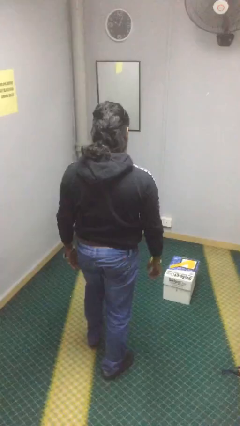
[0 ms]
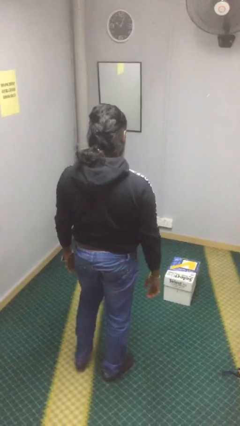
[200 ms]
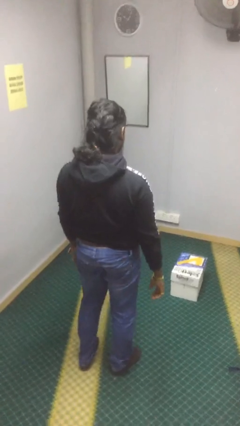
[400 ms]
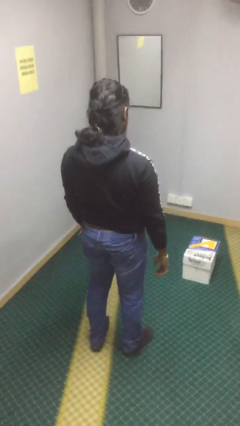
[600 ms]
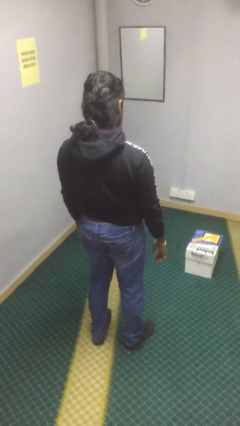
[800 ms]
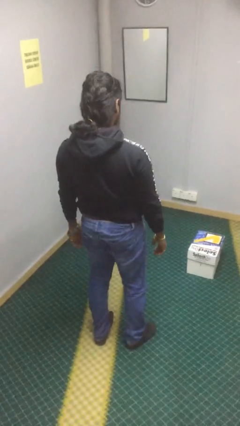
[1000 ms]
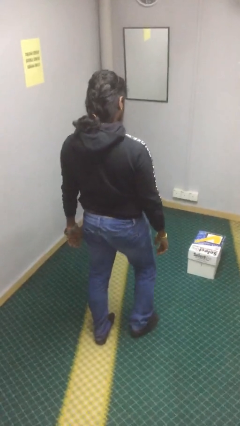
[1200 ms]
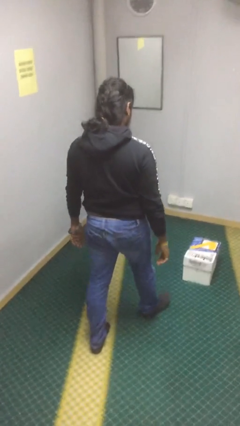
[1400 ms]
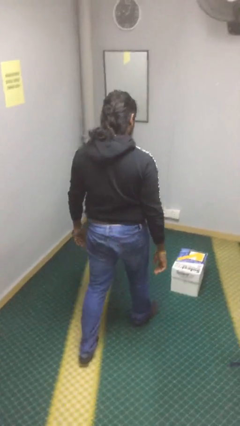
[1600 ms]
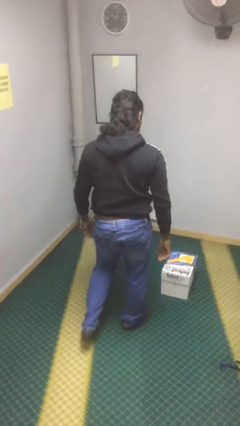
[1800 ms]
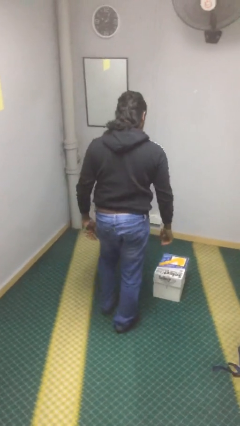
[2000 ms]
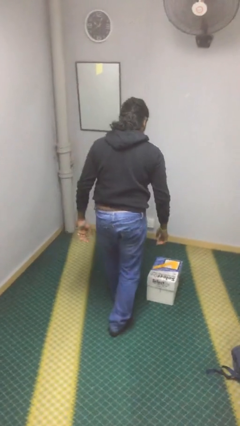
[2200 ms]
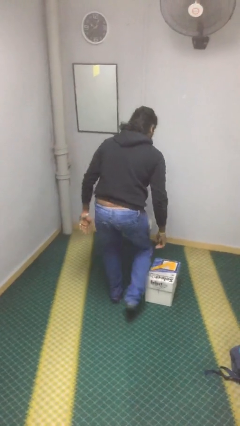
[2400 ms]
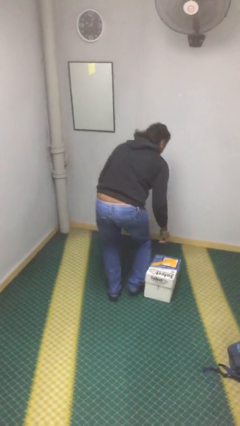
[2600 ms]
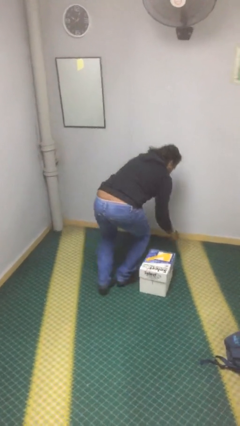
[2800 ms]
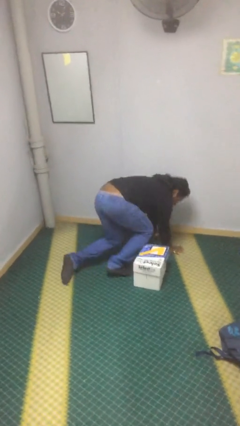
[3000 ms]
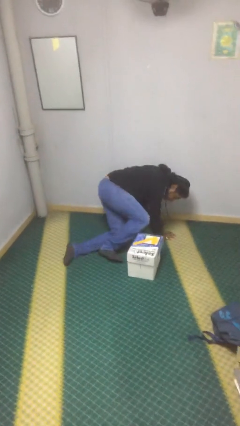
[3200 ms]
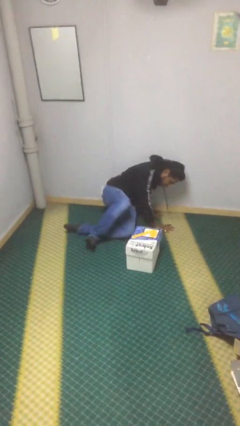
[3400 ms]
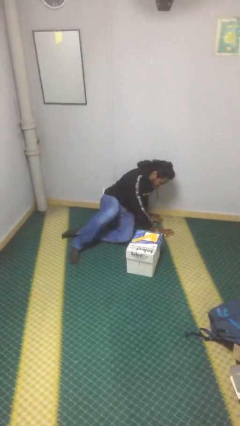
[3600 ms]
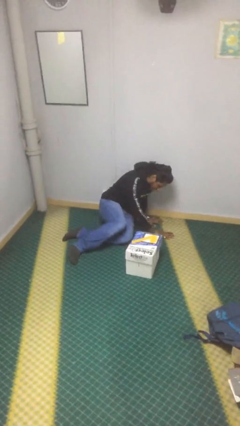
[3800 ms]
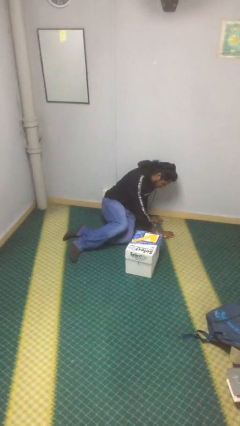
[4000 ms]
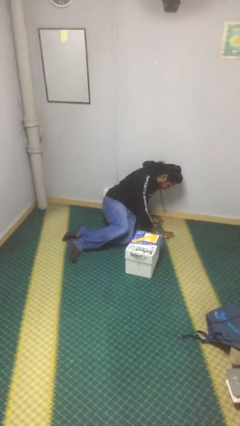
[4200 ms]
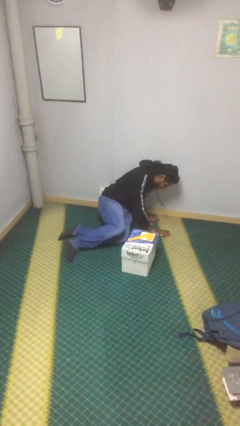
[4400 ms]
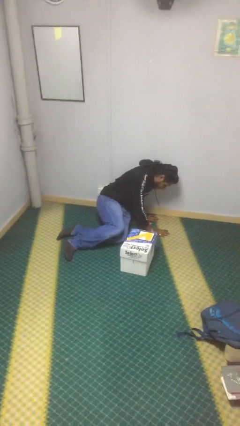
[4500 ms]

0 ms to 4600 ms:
person trips on object on floor

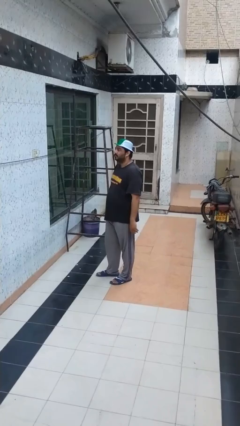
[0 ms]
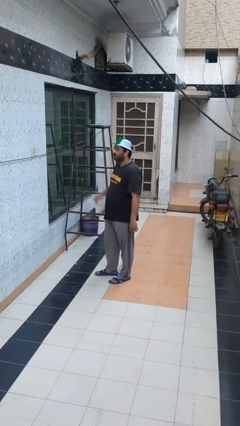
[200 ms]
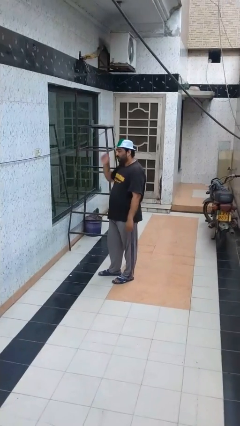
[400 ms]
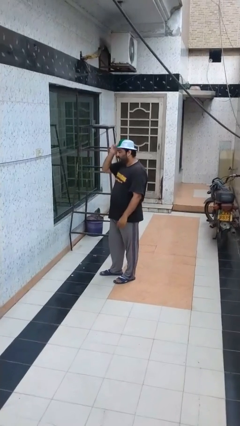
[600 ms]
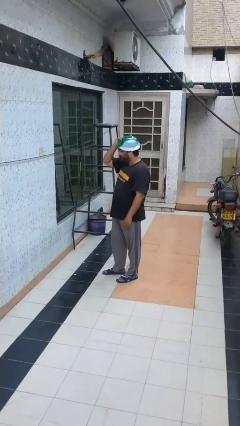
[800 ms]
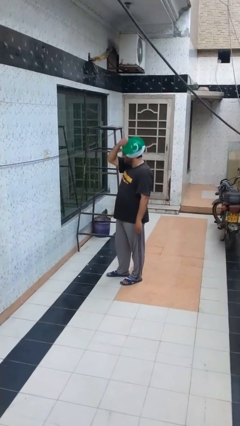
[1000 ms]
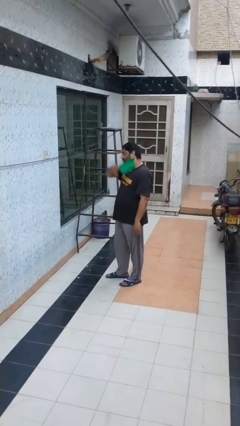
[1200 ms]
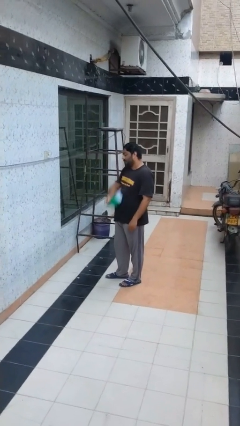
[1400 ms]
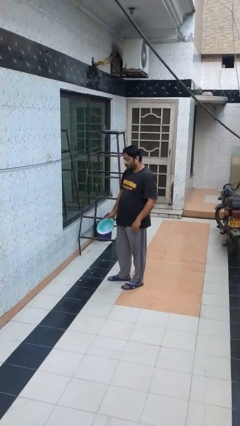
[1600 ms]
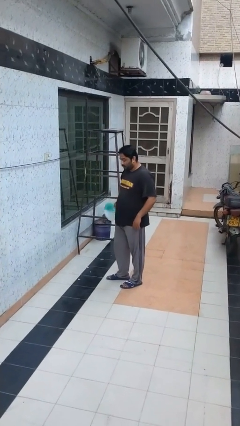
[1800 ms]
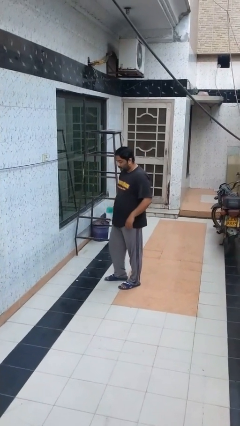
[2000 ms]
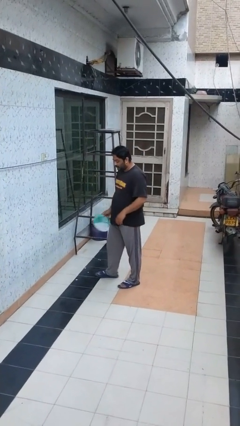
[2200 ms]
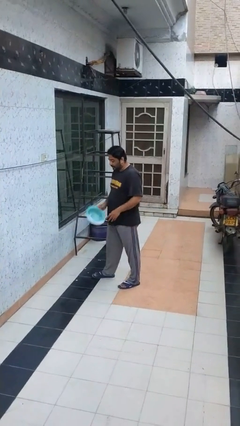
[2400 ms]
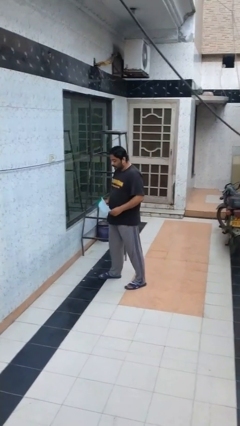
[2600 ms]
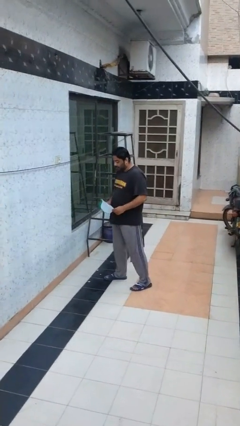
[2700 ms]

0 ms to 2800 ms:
person takes off hat

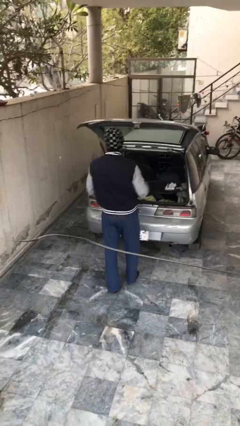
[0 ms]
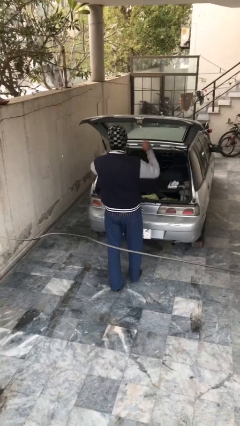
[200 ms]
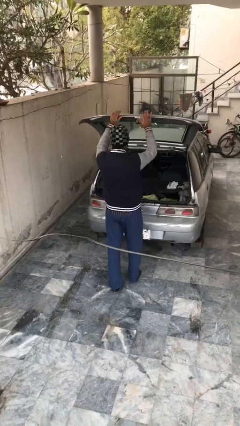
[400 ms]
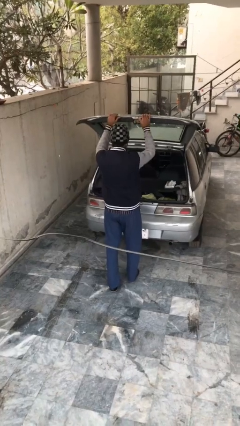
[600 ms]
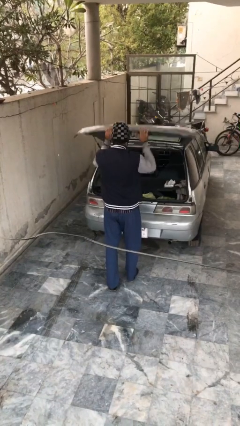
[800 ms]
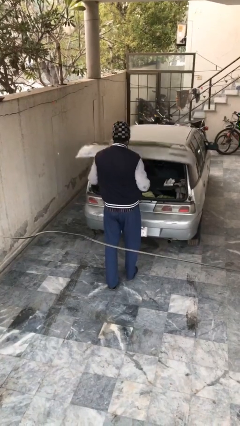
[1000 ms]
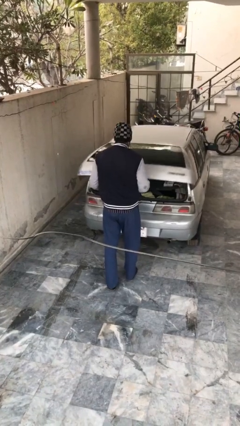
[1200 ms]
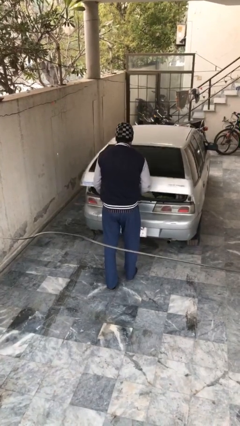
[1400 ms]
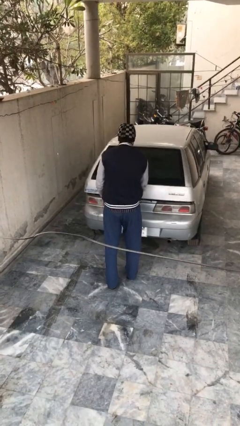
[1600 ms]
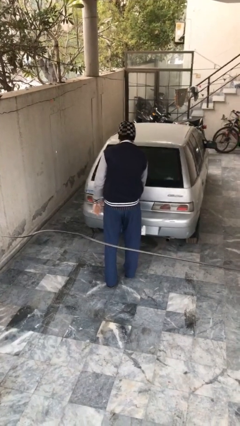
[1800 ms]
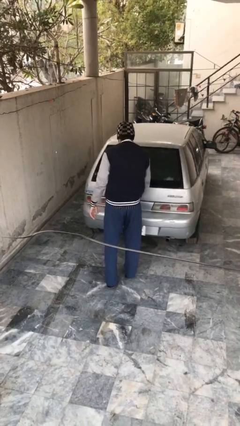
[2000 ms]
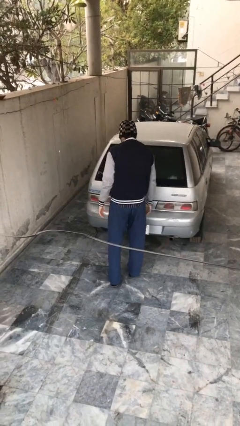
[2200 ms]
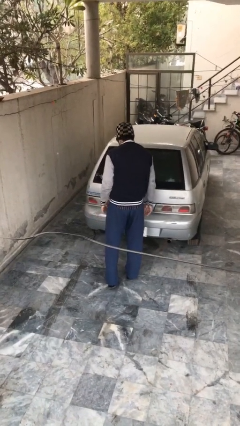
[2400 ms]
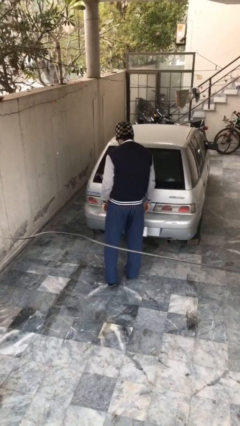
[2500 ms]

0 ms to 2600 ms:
person closes car trunk

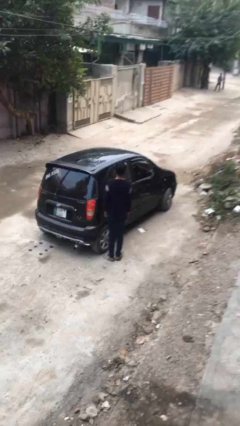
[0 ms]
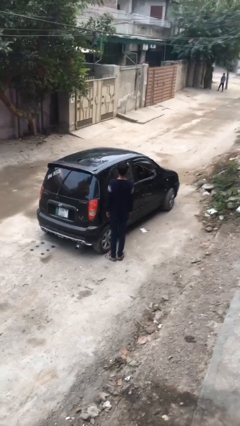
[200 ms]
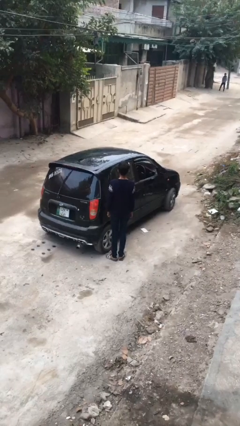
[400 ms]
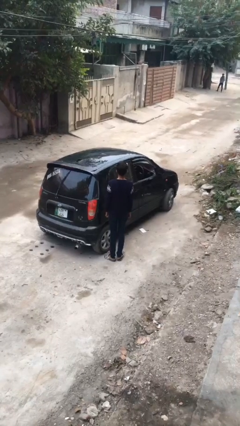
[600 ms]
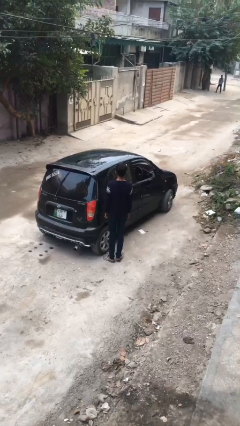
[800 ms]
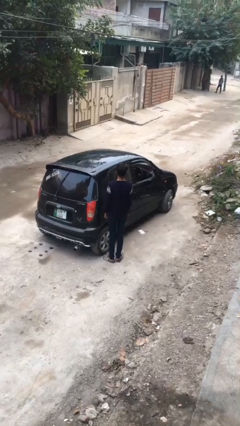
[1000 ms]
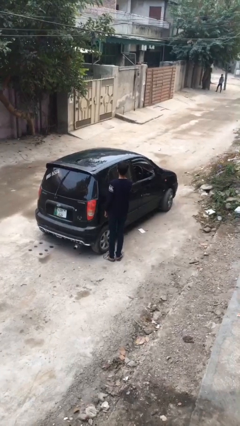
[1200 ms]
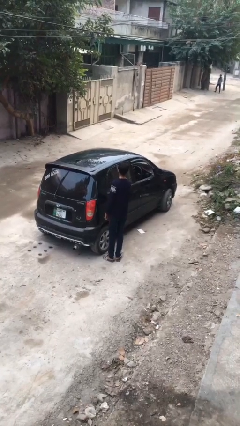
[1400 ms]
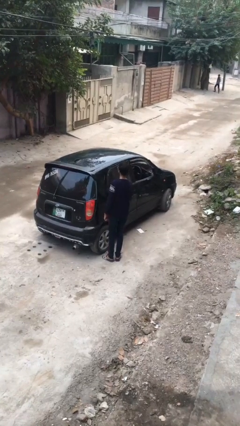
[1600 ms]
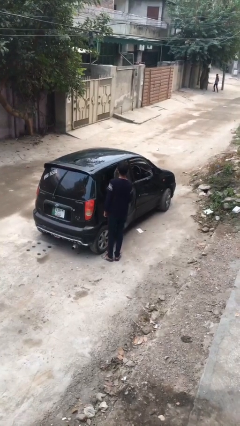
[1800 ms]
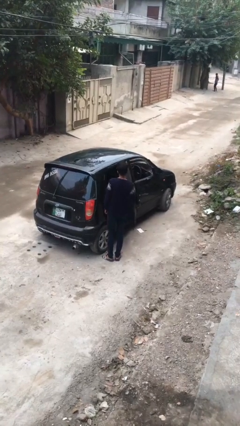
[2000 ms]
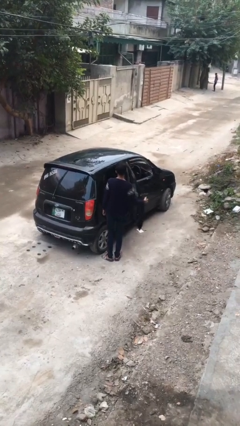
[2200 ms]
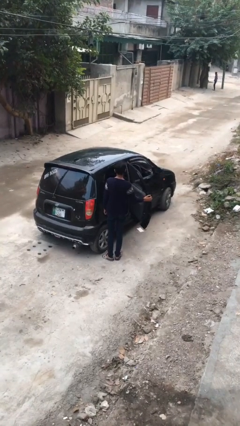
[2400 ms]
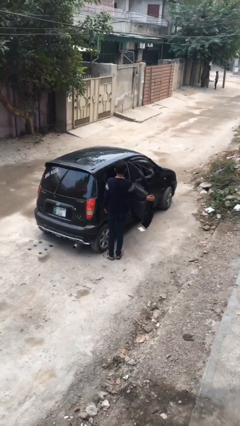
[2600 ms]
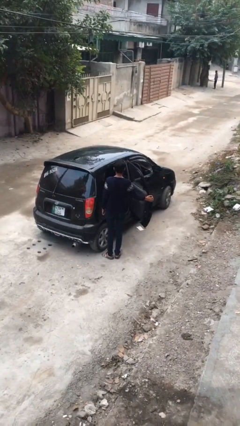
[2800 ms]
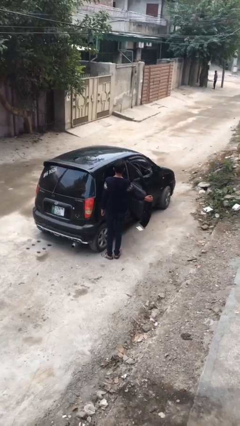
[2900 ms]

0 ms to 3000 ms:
person opens car door

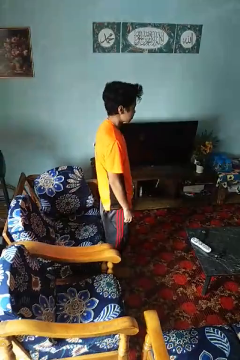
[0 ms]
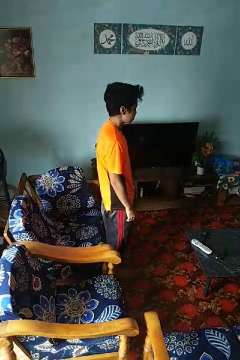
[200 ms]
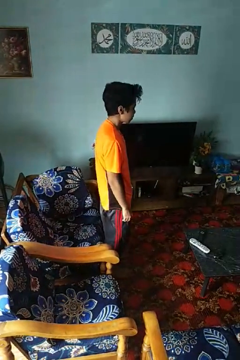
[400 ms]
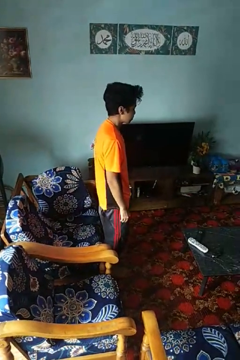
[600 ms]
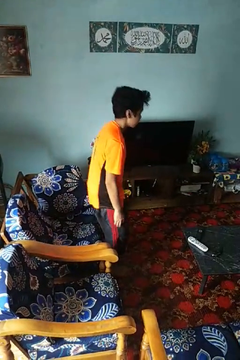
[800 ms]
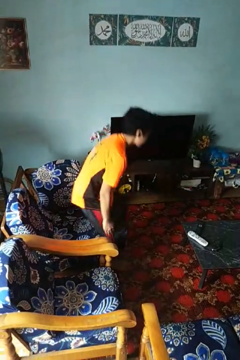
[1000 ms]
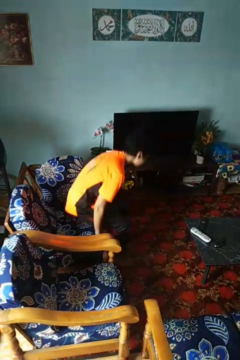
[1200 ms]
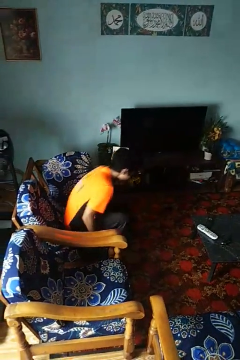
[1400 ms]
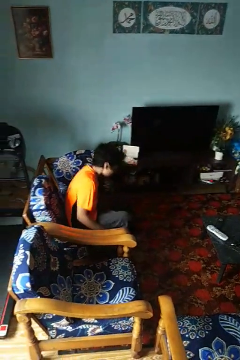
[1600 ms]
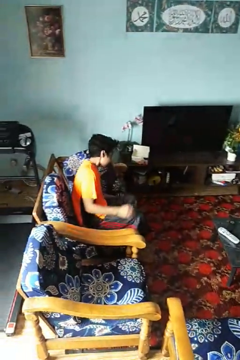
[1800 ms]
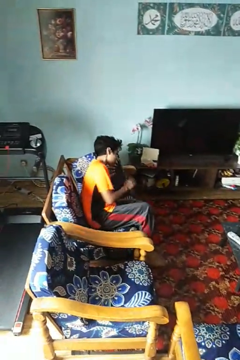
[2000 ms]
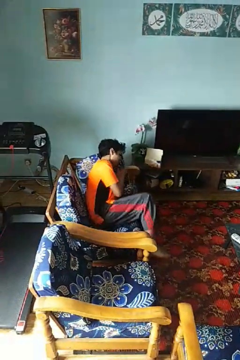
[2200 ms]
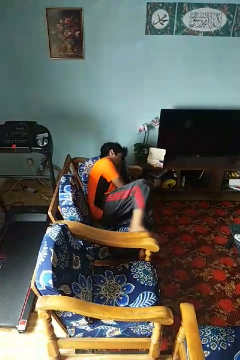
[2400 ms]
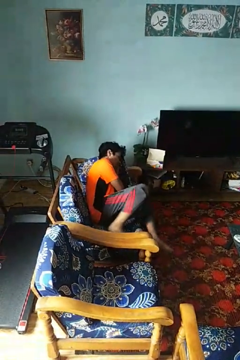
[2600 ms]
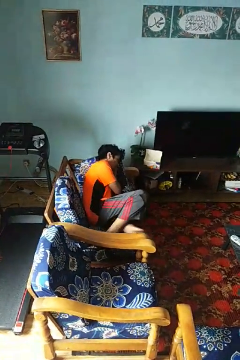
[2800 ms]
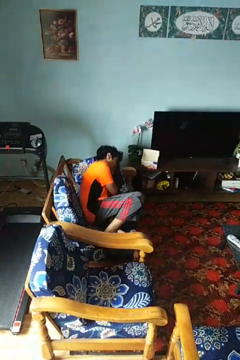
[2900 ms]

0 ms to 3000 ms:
person lies down on couch

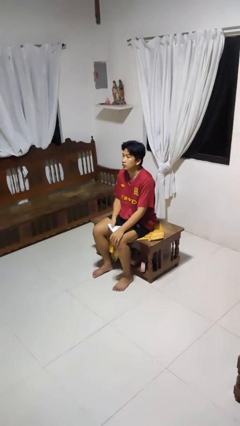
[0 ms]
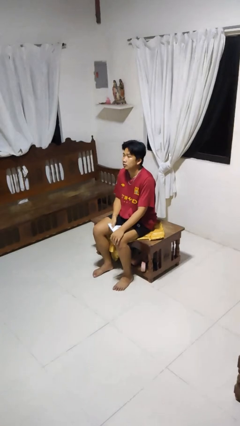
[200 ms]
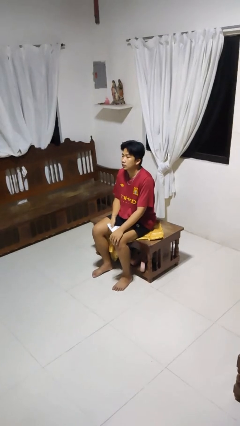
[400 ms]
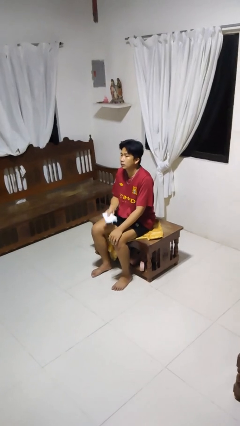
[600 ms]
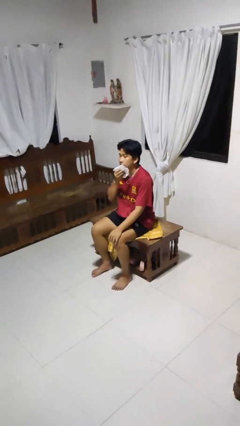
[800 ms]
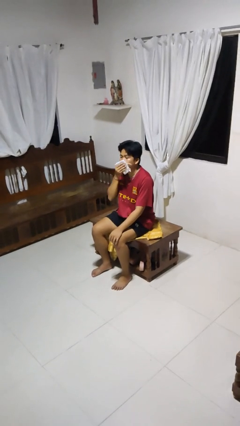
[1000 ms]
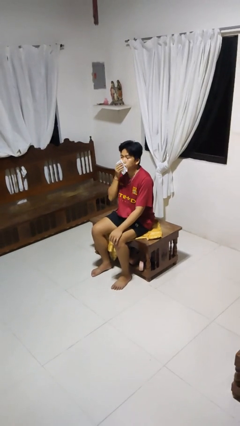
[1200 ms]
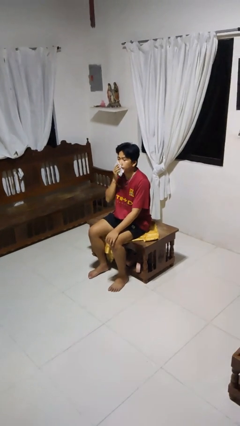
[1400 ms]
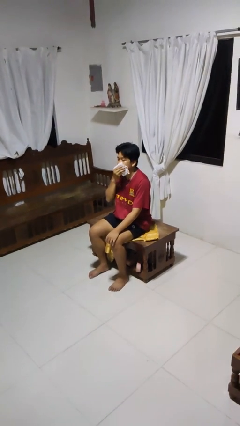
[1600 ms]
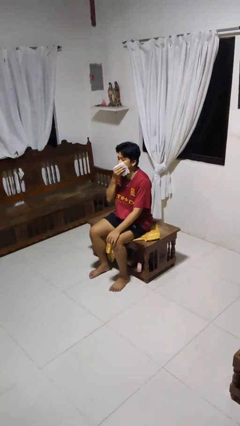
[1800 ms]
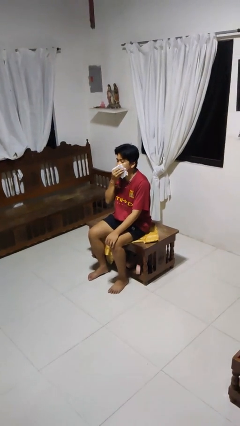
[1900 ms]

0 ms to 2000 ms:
person wipes mouth with napkin
